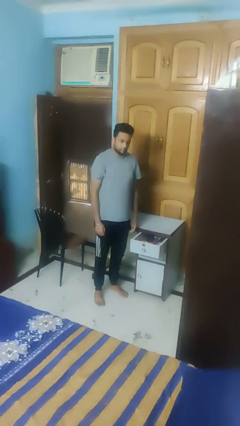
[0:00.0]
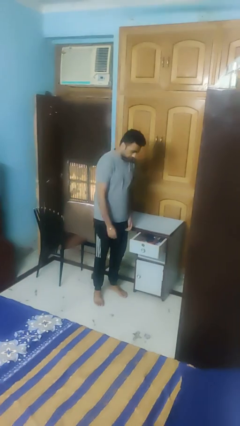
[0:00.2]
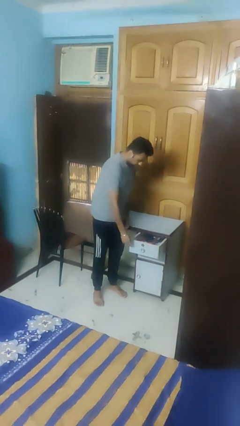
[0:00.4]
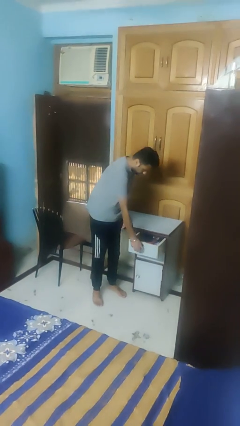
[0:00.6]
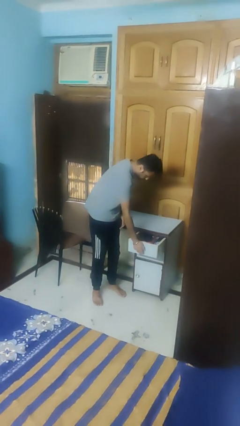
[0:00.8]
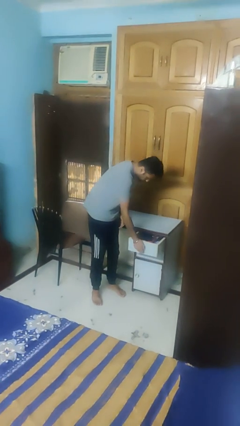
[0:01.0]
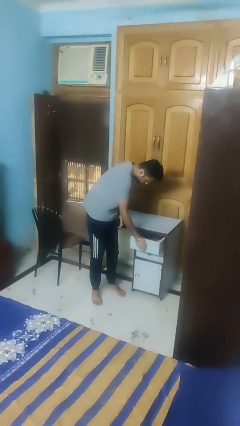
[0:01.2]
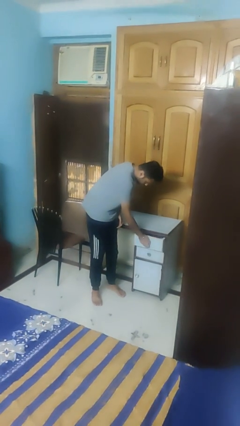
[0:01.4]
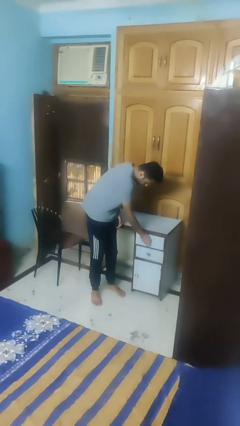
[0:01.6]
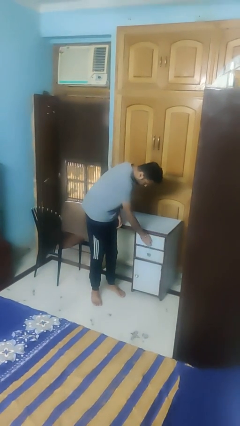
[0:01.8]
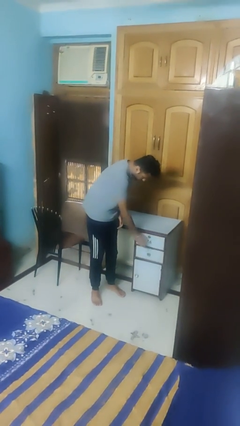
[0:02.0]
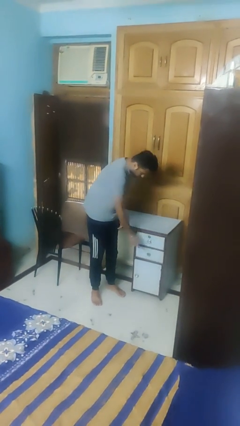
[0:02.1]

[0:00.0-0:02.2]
person closes dresser drawer

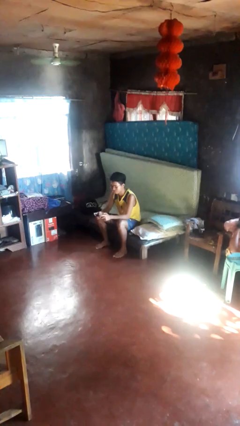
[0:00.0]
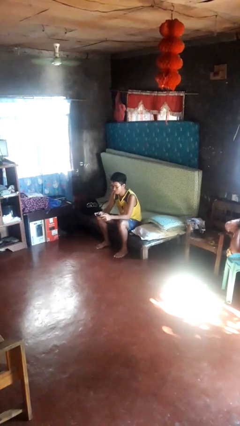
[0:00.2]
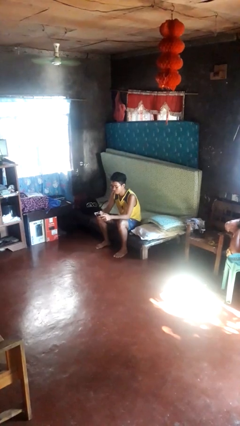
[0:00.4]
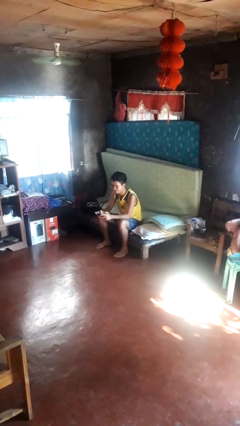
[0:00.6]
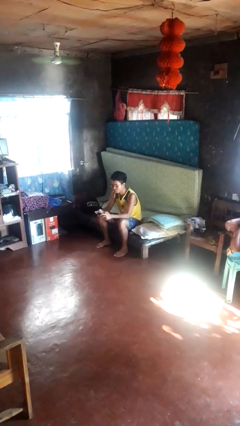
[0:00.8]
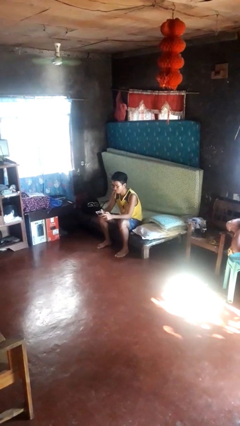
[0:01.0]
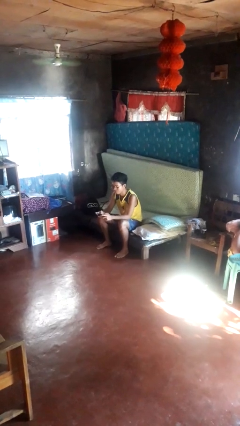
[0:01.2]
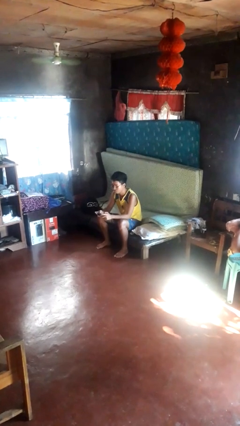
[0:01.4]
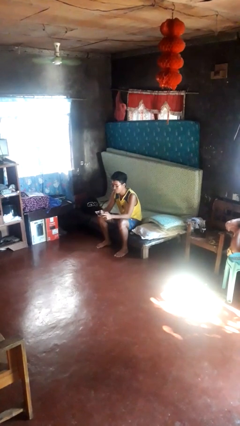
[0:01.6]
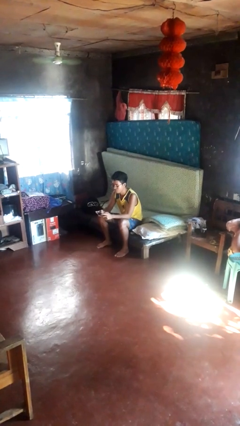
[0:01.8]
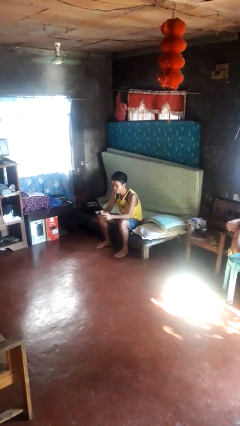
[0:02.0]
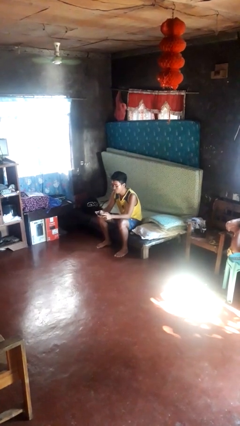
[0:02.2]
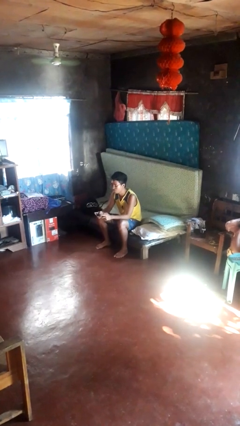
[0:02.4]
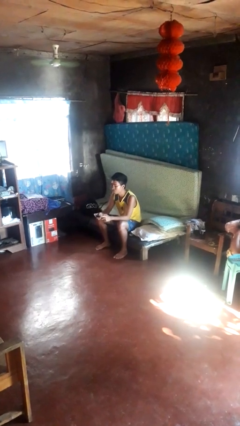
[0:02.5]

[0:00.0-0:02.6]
person interacts with handheld game

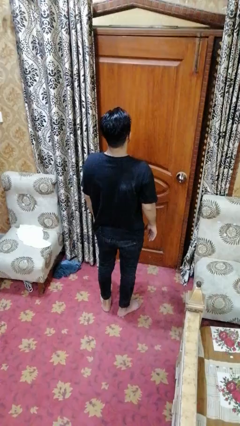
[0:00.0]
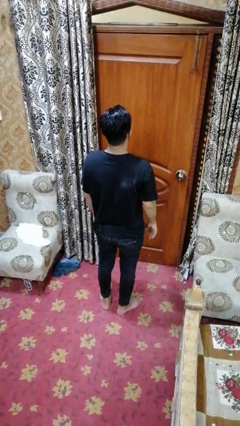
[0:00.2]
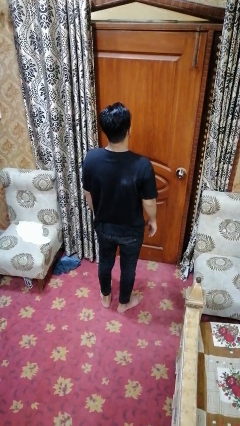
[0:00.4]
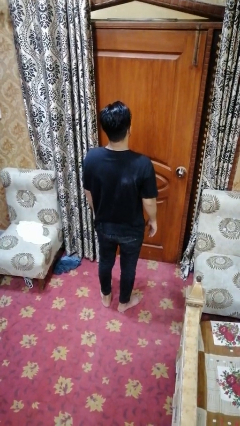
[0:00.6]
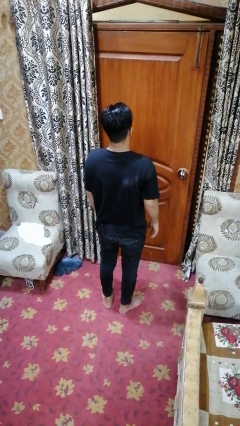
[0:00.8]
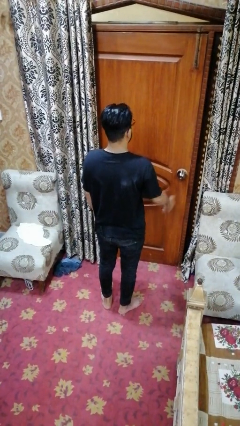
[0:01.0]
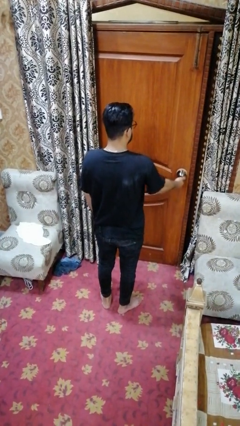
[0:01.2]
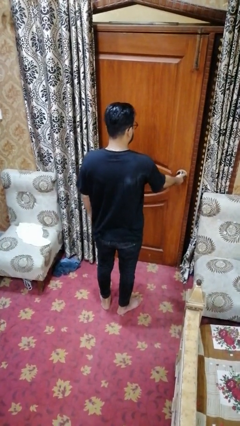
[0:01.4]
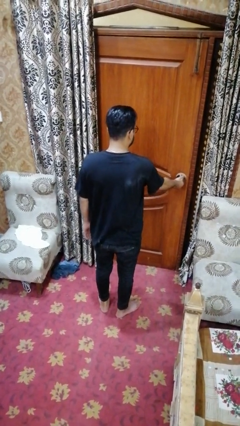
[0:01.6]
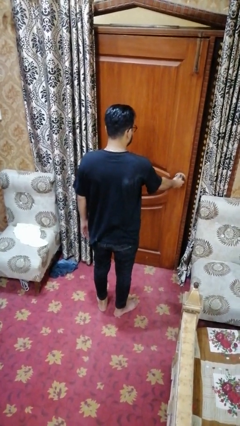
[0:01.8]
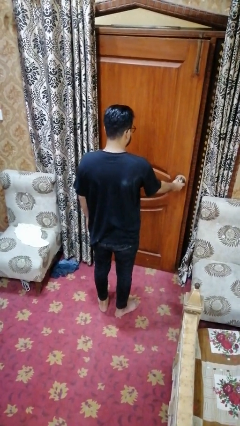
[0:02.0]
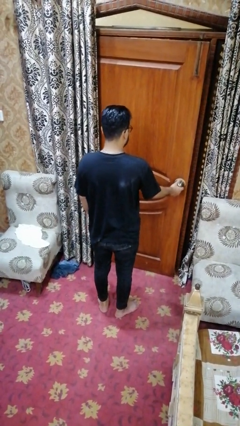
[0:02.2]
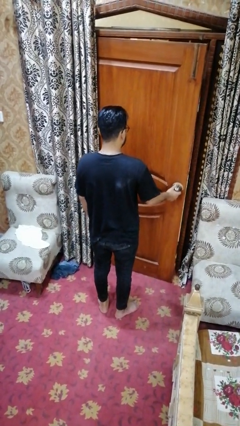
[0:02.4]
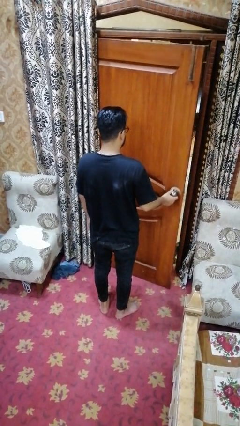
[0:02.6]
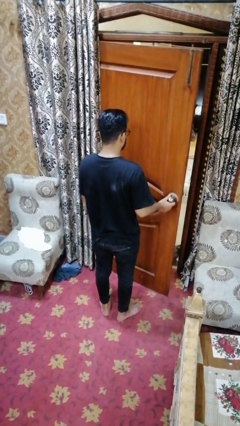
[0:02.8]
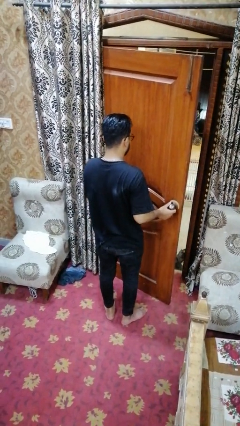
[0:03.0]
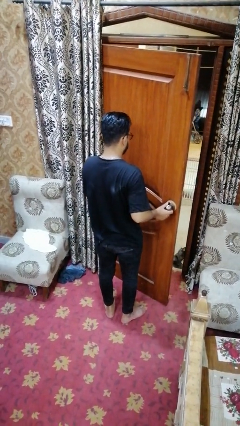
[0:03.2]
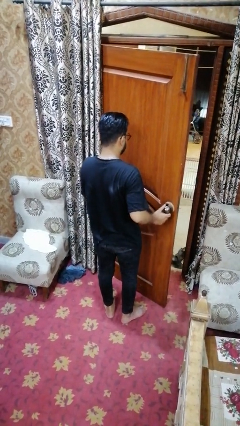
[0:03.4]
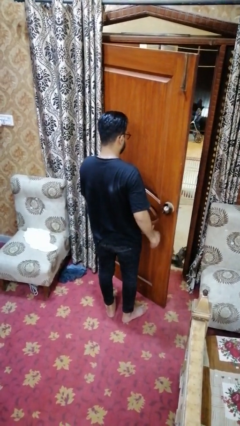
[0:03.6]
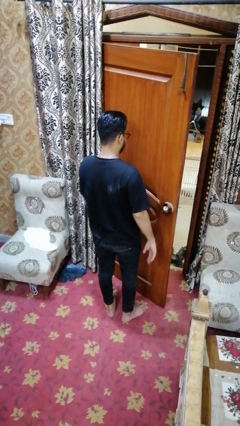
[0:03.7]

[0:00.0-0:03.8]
person opens facility door

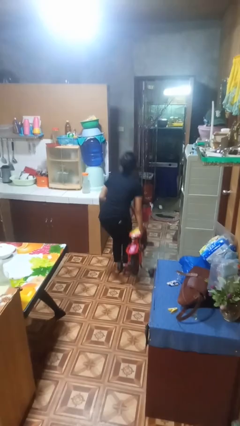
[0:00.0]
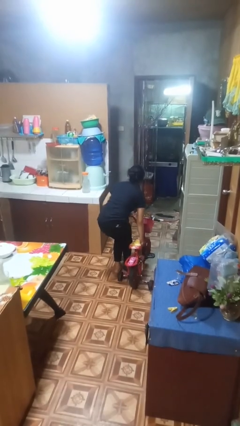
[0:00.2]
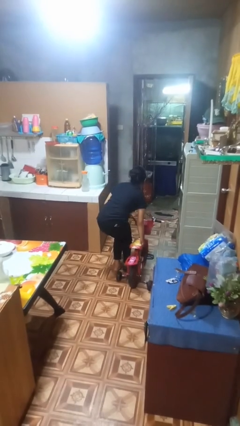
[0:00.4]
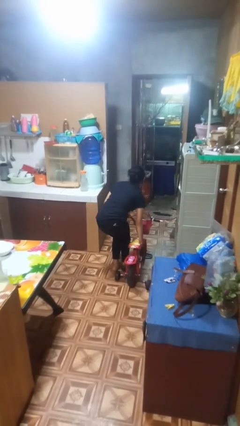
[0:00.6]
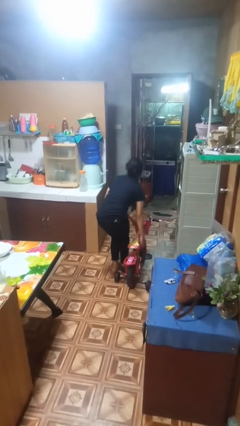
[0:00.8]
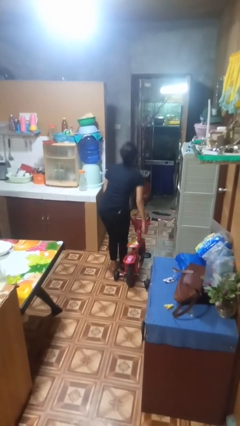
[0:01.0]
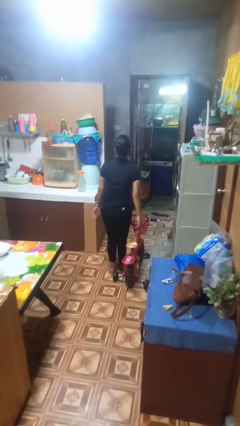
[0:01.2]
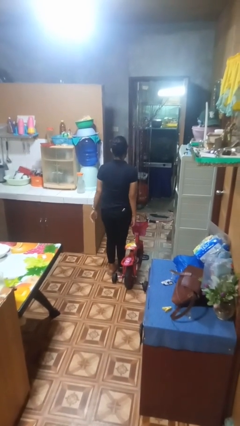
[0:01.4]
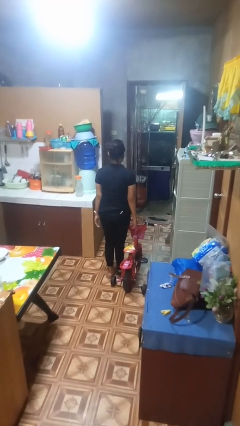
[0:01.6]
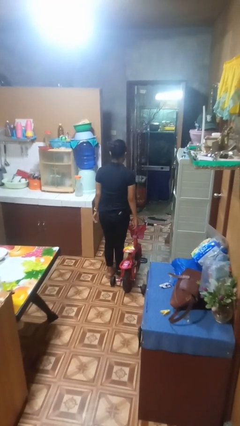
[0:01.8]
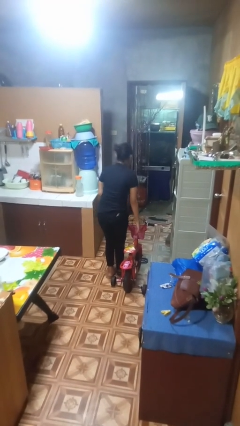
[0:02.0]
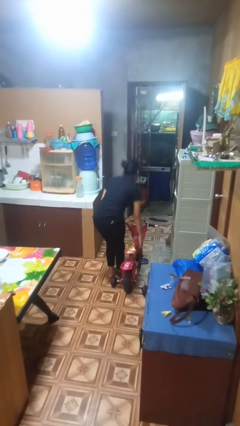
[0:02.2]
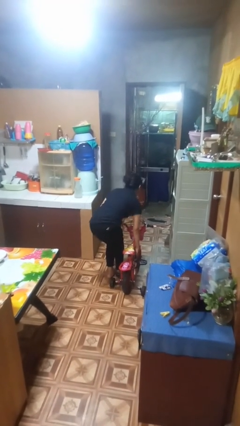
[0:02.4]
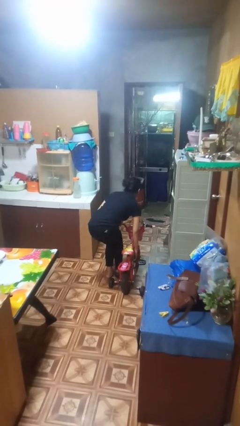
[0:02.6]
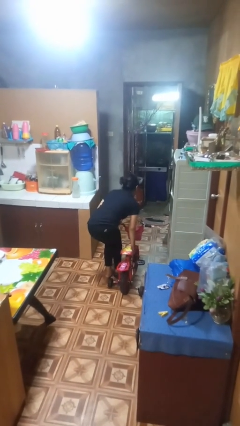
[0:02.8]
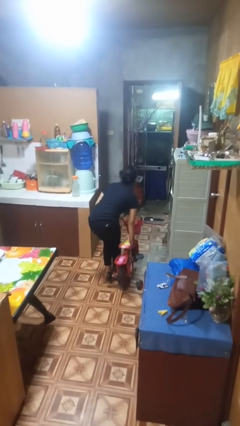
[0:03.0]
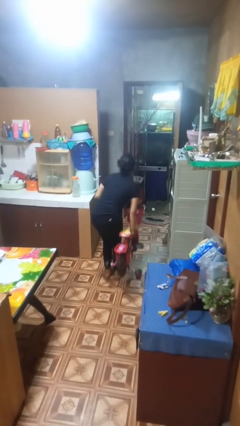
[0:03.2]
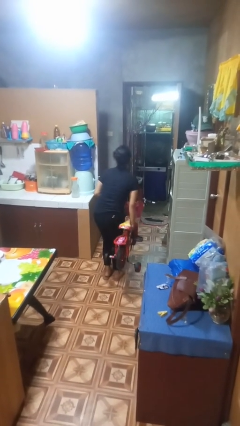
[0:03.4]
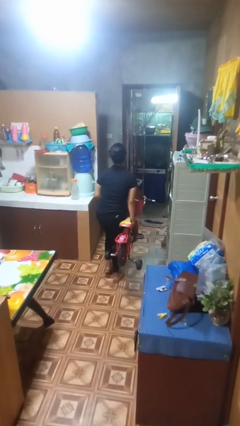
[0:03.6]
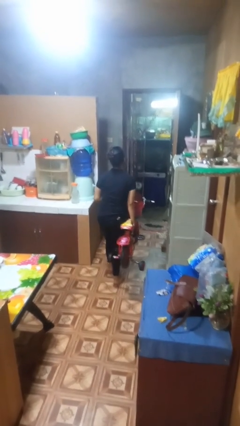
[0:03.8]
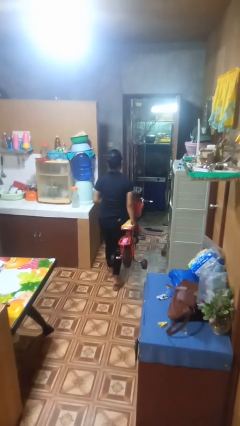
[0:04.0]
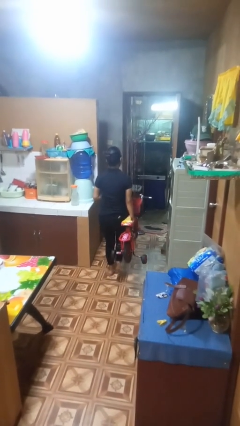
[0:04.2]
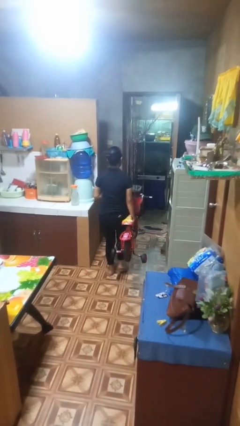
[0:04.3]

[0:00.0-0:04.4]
person carries bicycle

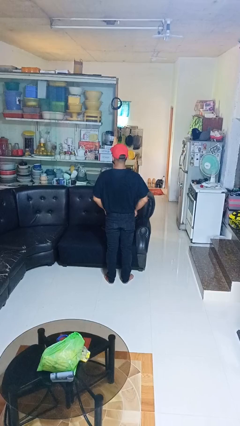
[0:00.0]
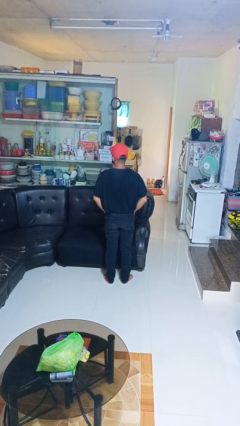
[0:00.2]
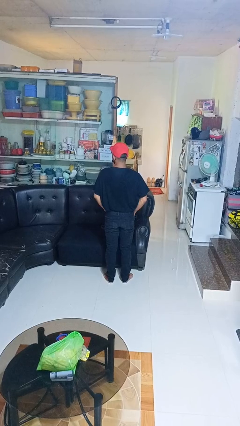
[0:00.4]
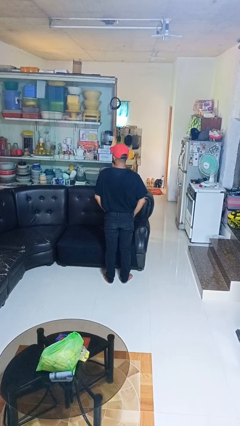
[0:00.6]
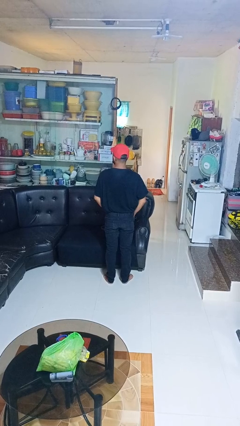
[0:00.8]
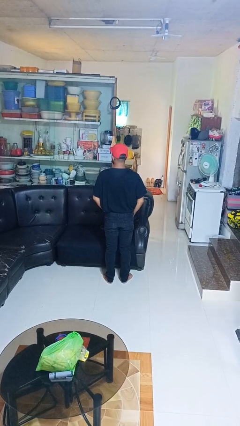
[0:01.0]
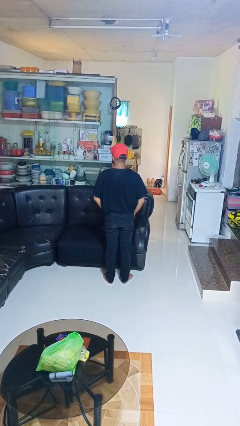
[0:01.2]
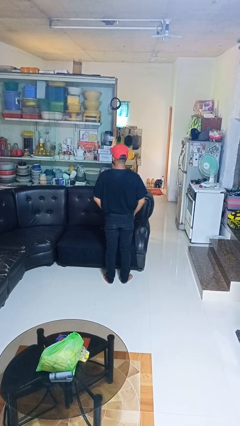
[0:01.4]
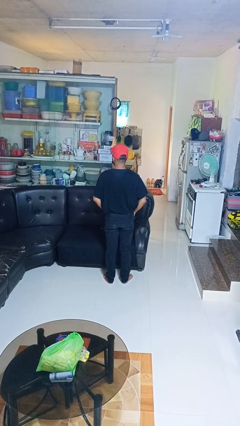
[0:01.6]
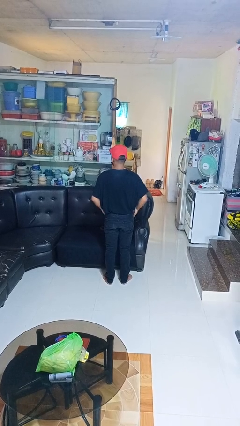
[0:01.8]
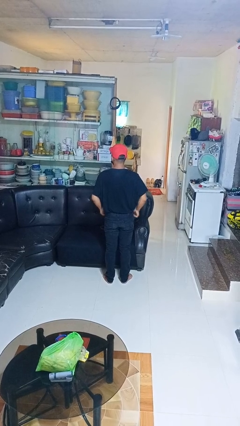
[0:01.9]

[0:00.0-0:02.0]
person puts hands in back pockets

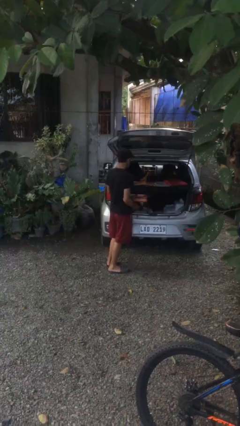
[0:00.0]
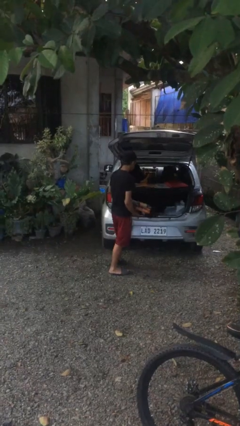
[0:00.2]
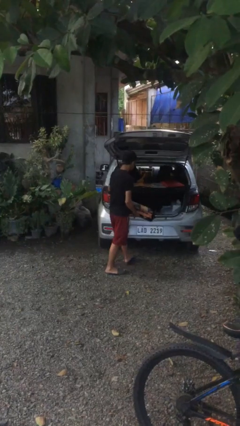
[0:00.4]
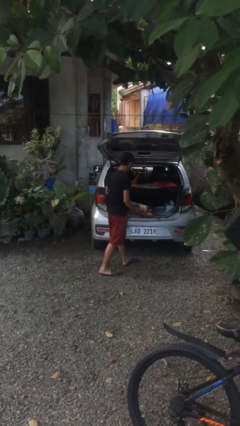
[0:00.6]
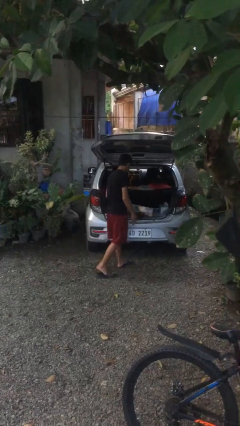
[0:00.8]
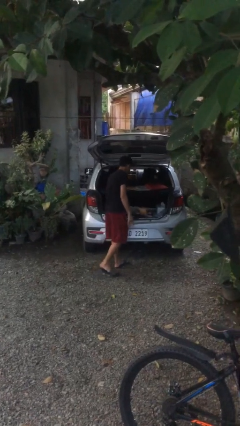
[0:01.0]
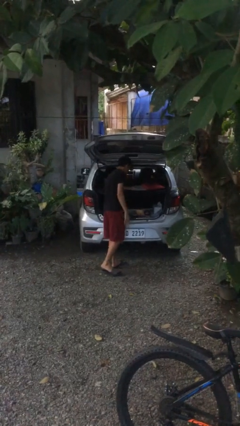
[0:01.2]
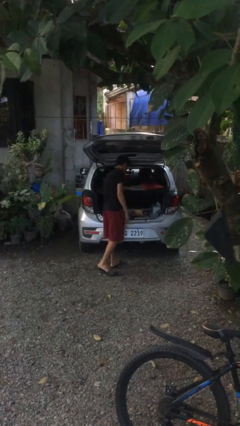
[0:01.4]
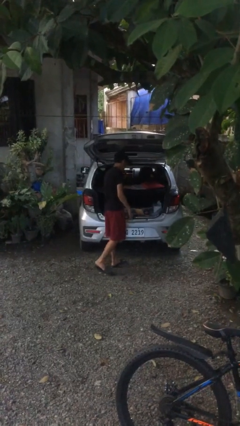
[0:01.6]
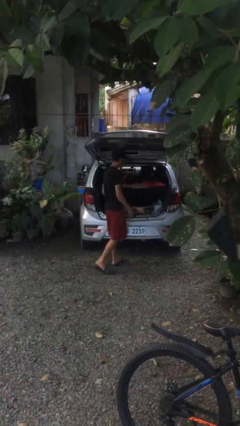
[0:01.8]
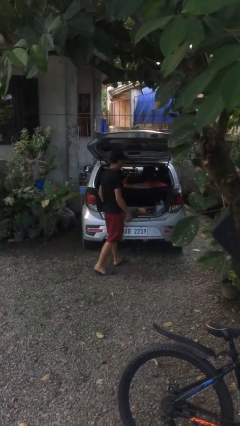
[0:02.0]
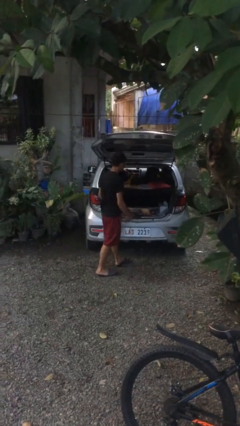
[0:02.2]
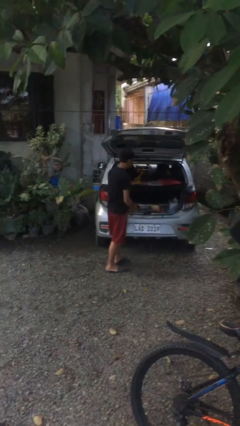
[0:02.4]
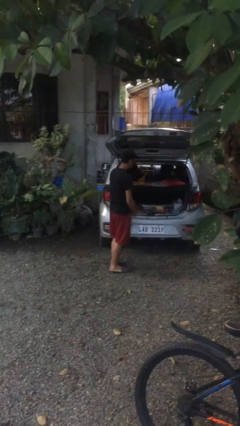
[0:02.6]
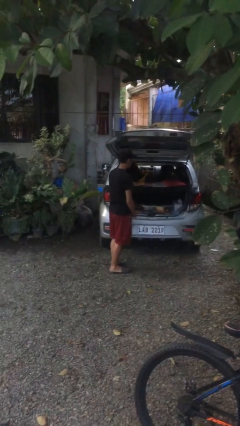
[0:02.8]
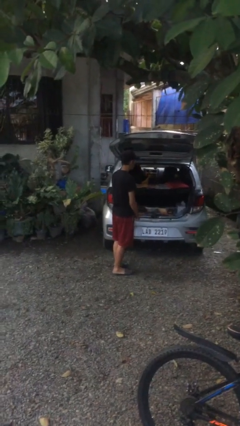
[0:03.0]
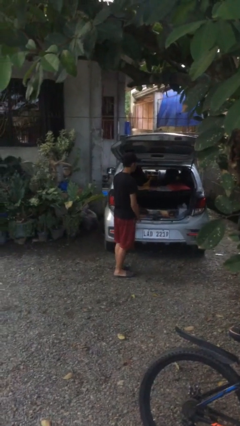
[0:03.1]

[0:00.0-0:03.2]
person loads car
